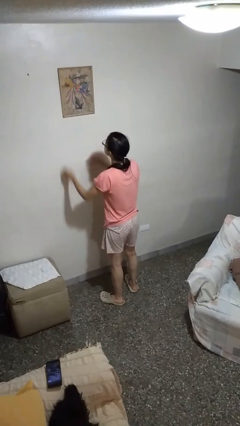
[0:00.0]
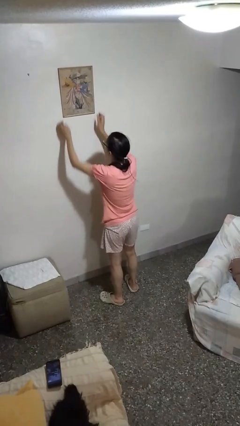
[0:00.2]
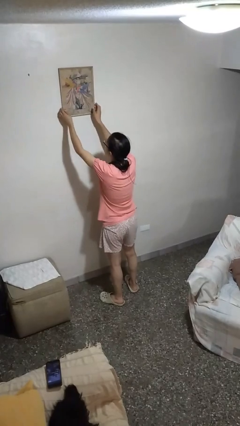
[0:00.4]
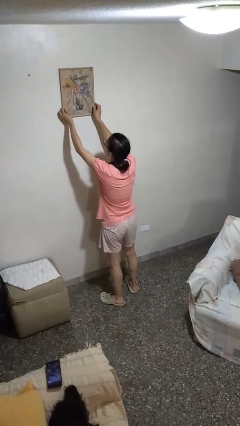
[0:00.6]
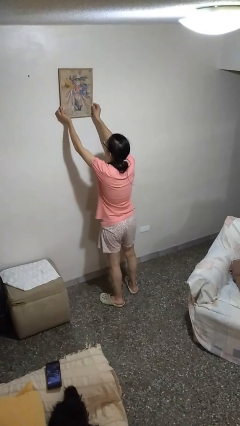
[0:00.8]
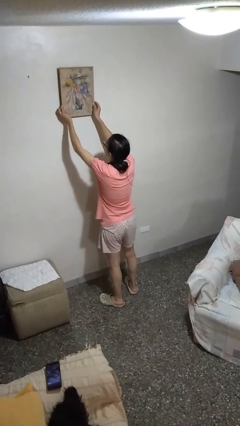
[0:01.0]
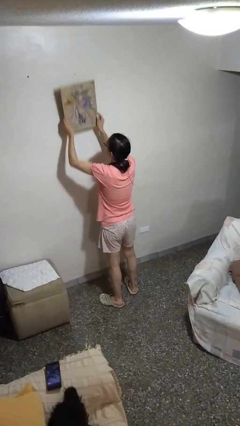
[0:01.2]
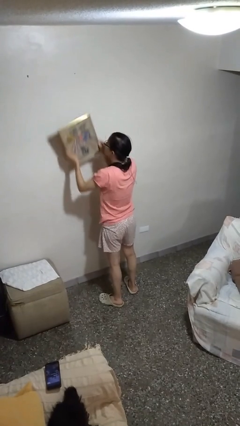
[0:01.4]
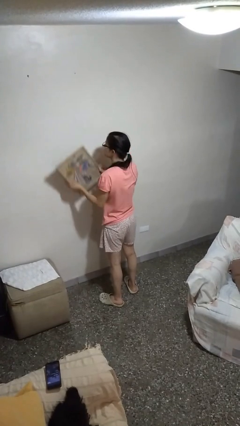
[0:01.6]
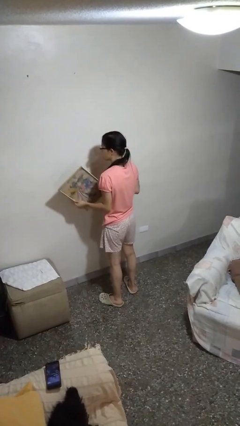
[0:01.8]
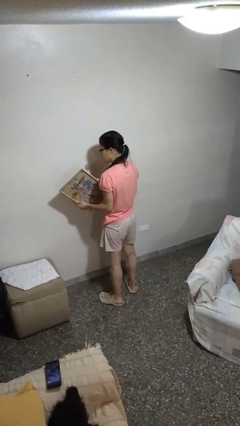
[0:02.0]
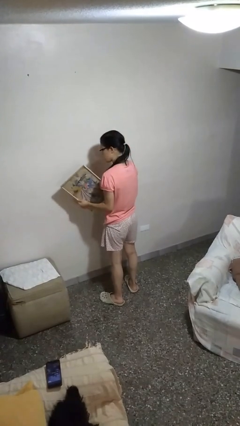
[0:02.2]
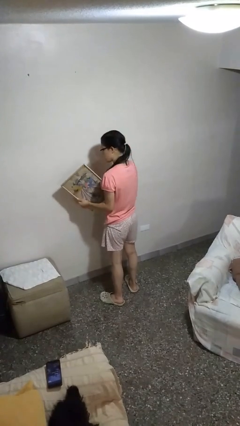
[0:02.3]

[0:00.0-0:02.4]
person takes down picture frame

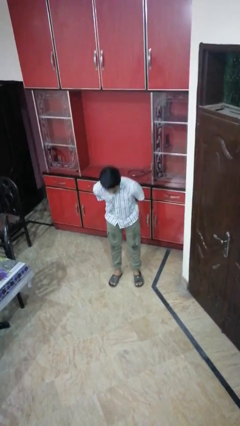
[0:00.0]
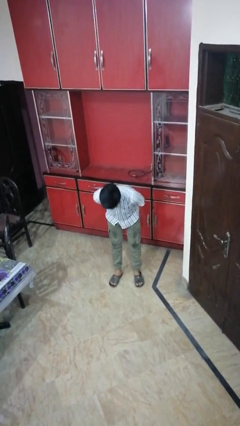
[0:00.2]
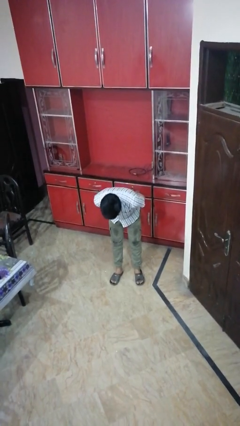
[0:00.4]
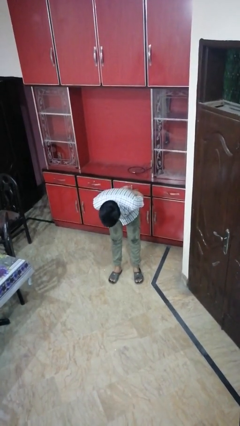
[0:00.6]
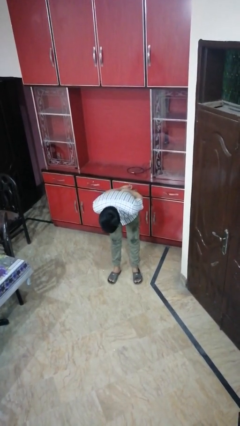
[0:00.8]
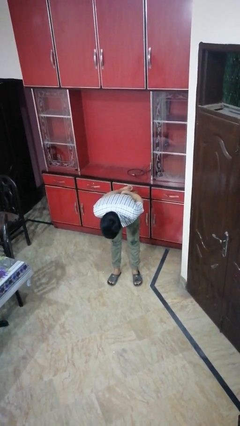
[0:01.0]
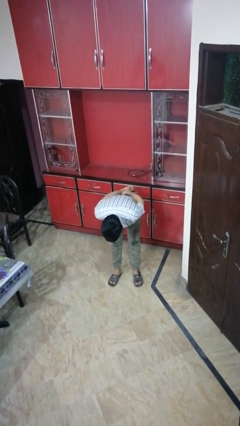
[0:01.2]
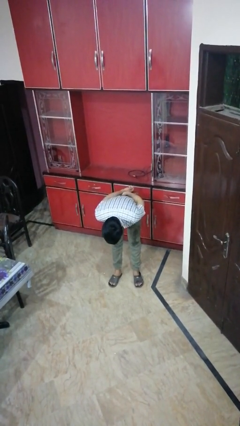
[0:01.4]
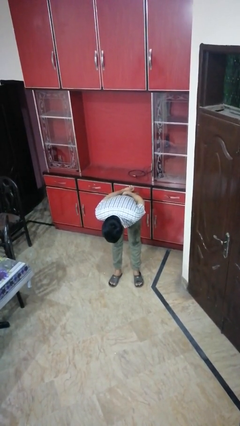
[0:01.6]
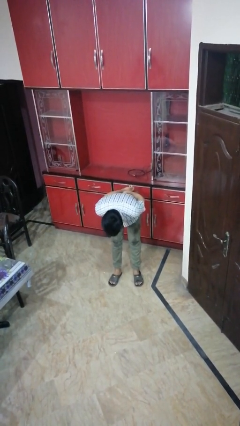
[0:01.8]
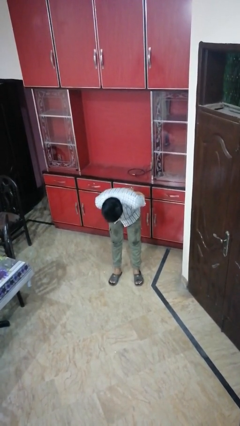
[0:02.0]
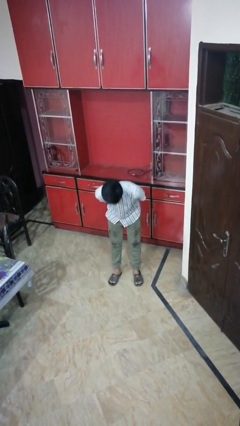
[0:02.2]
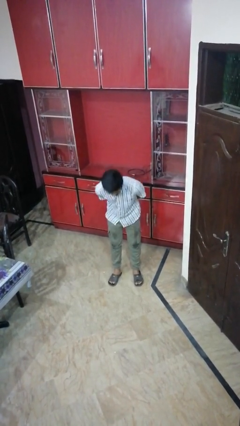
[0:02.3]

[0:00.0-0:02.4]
person bows

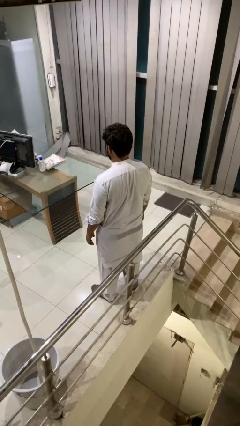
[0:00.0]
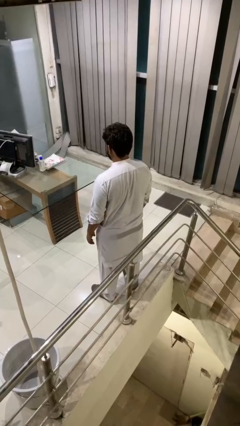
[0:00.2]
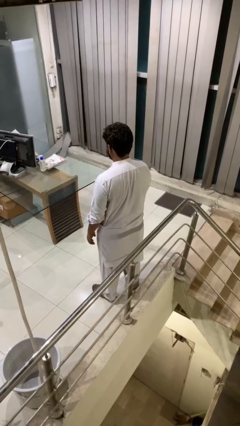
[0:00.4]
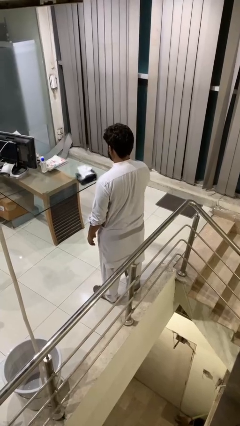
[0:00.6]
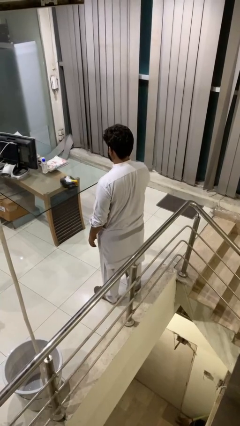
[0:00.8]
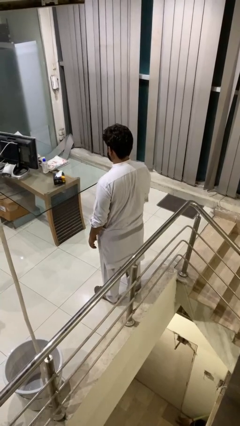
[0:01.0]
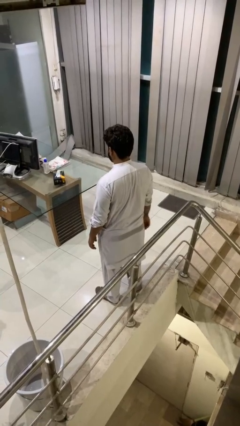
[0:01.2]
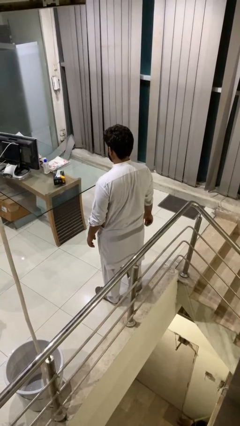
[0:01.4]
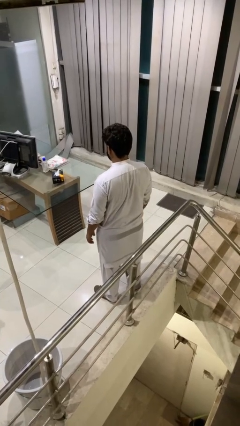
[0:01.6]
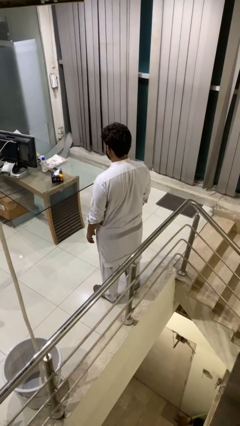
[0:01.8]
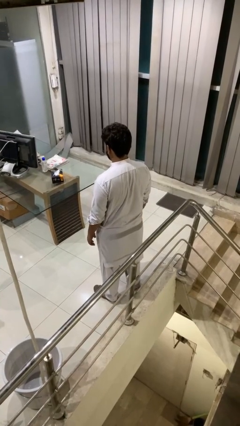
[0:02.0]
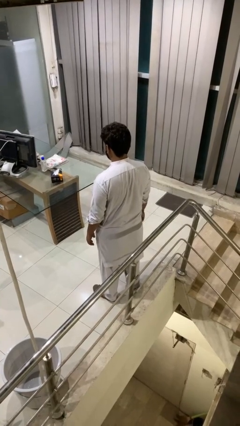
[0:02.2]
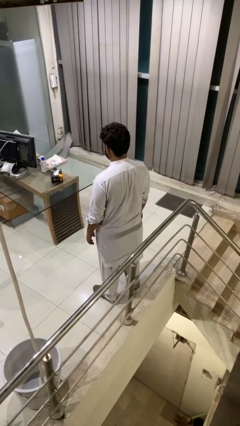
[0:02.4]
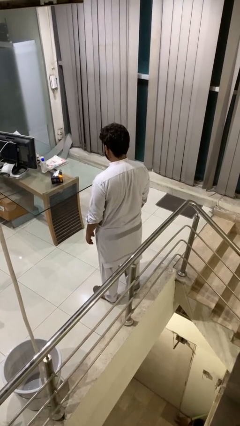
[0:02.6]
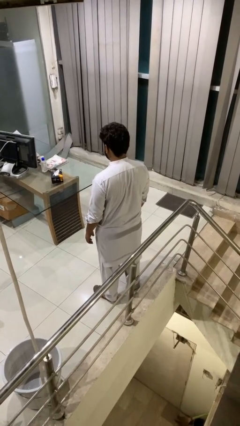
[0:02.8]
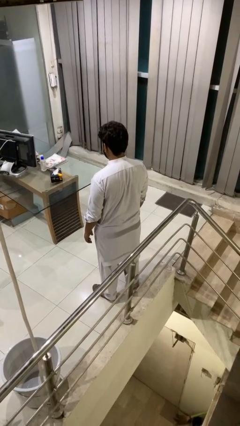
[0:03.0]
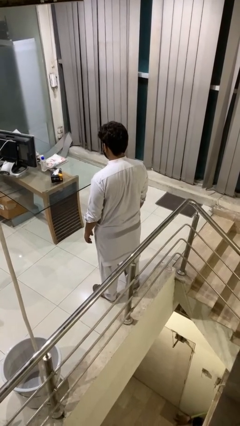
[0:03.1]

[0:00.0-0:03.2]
person throws object on table

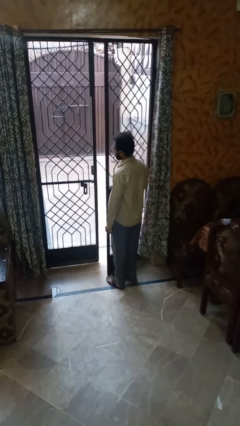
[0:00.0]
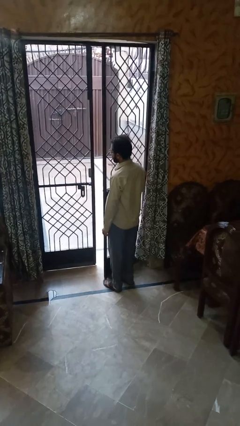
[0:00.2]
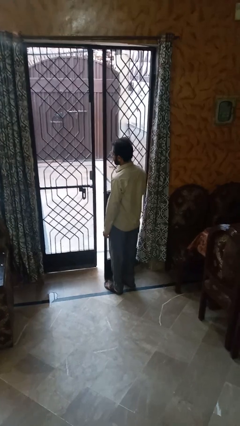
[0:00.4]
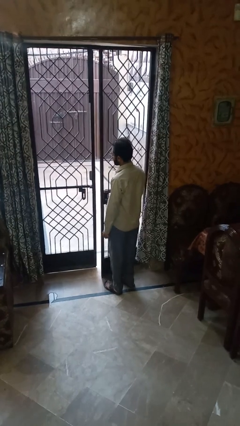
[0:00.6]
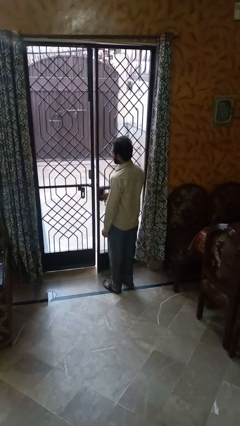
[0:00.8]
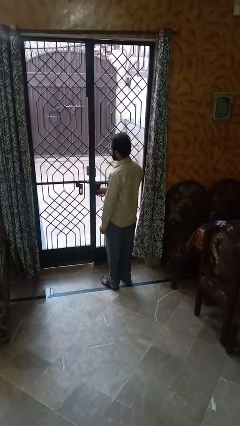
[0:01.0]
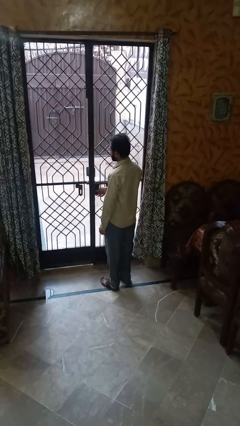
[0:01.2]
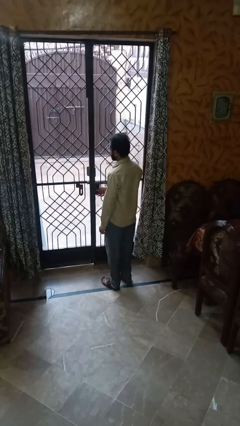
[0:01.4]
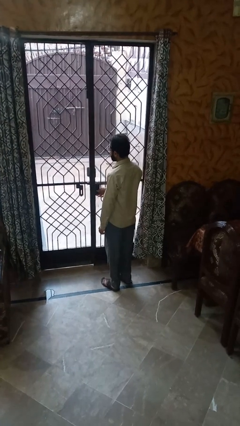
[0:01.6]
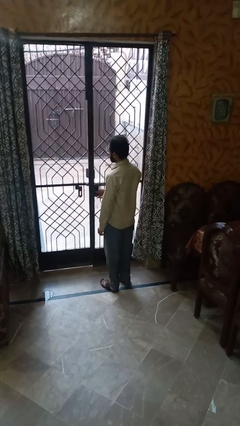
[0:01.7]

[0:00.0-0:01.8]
person closes home window

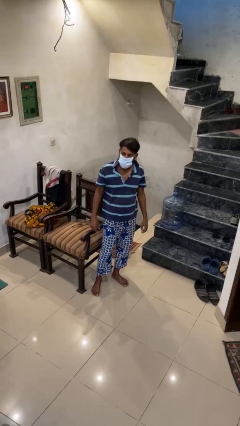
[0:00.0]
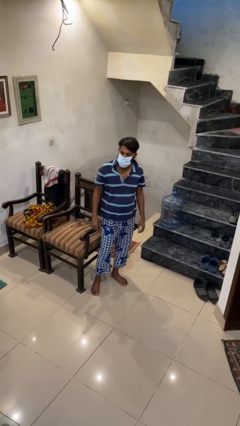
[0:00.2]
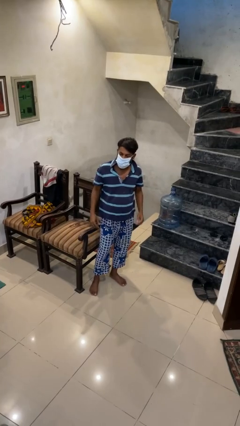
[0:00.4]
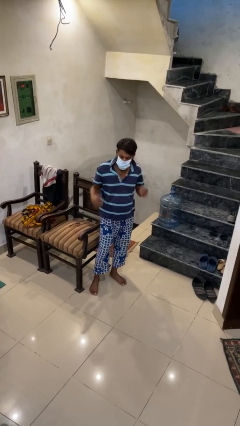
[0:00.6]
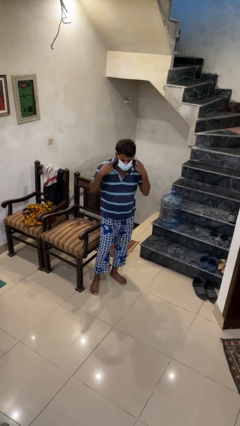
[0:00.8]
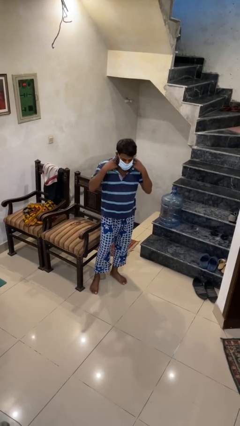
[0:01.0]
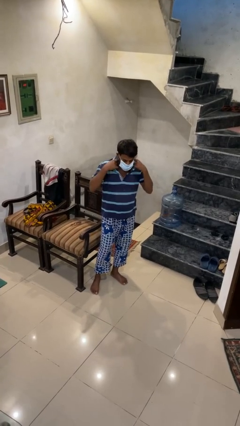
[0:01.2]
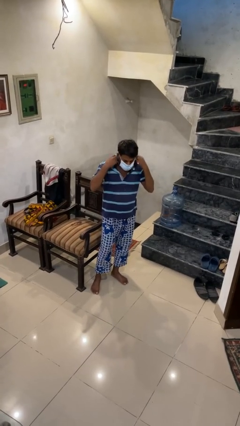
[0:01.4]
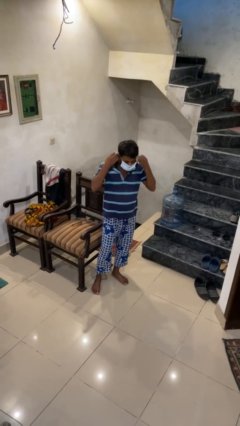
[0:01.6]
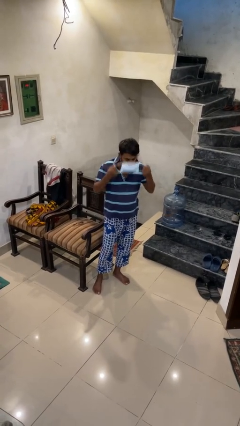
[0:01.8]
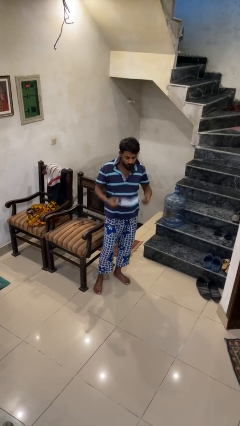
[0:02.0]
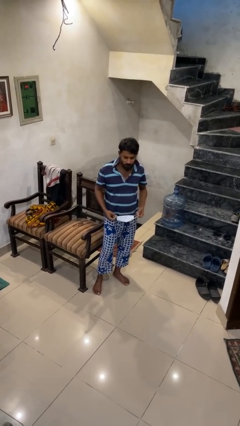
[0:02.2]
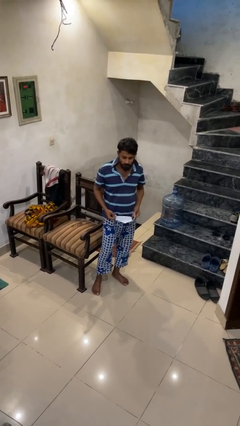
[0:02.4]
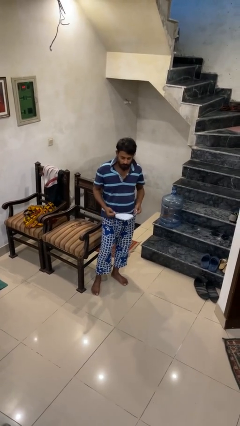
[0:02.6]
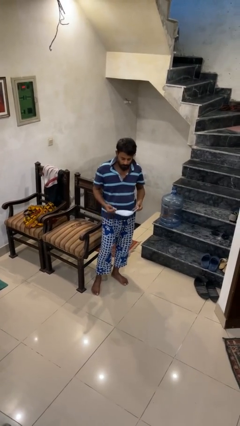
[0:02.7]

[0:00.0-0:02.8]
person takes off facemask

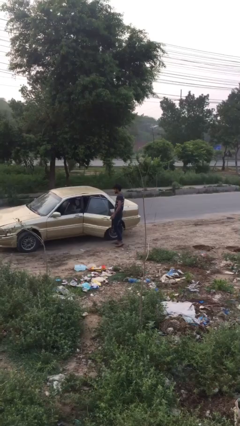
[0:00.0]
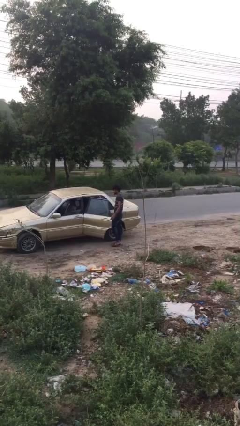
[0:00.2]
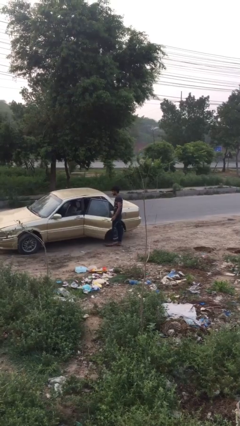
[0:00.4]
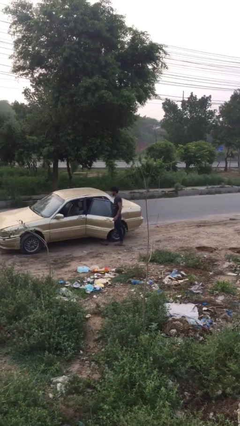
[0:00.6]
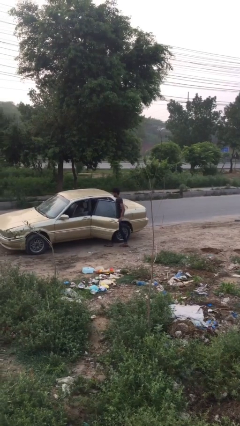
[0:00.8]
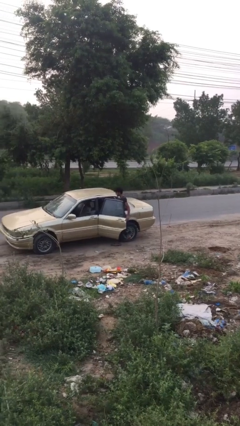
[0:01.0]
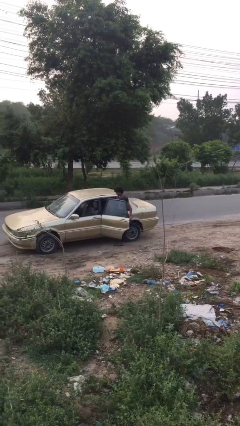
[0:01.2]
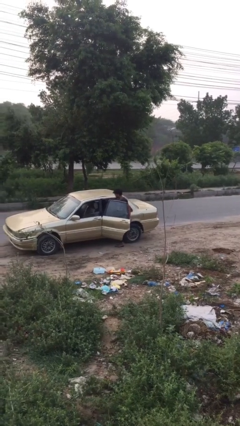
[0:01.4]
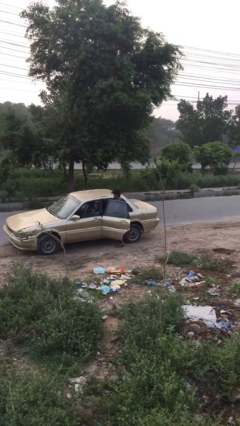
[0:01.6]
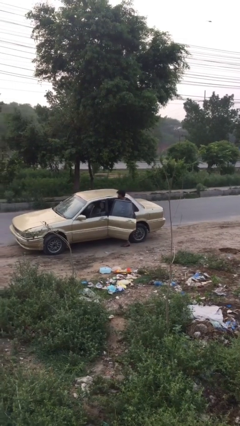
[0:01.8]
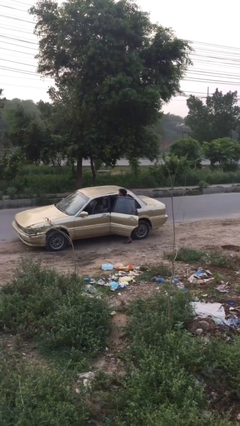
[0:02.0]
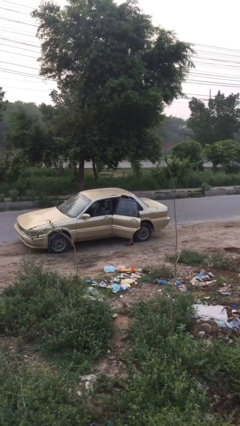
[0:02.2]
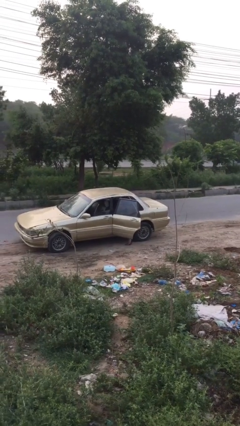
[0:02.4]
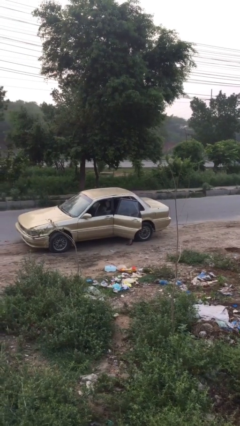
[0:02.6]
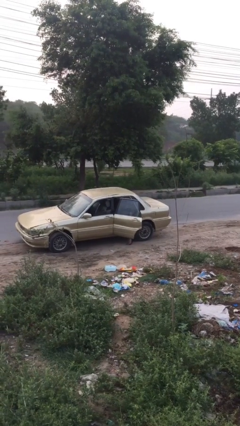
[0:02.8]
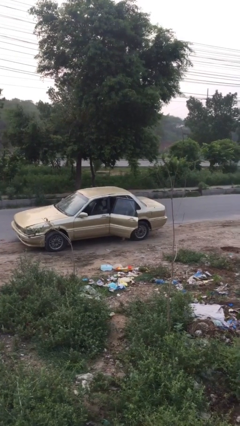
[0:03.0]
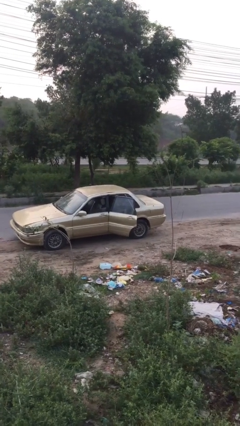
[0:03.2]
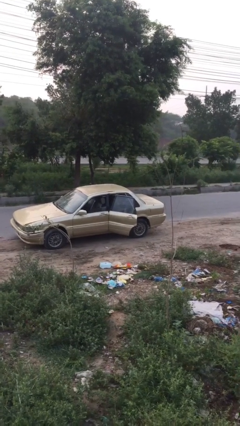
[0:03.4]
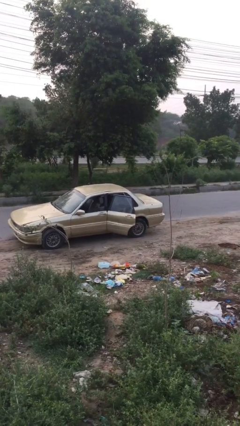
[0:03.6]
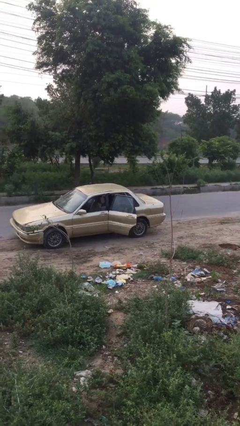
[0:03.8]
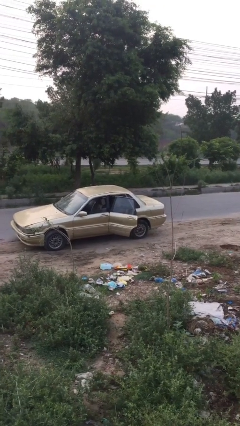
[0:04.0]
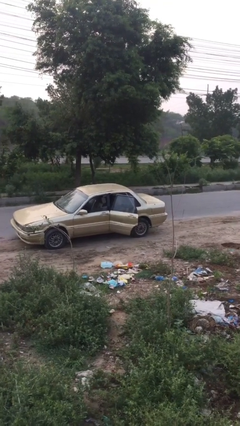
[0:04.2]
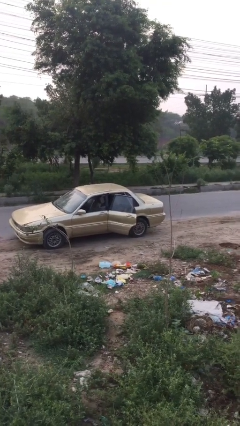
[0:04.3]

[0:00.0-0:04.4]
person enters car
